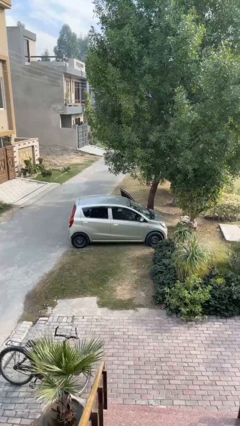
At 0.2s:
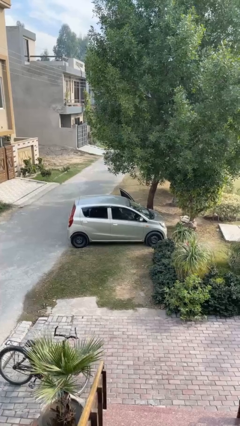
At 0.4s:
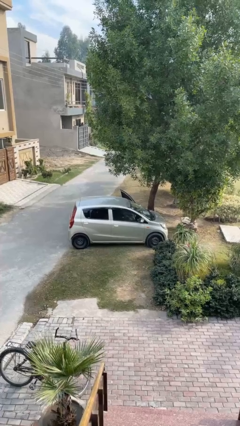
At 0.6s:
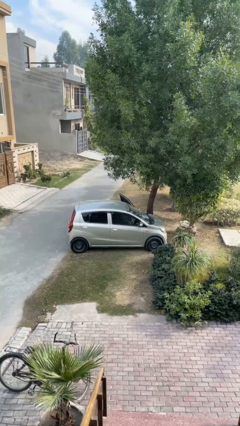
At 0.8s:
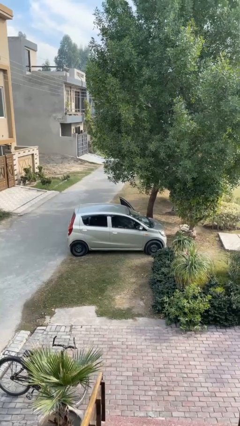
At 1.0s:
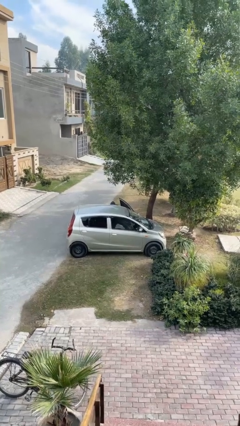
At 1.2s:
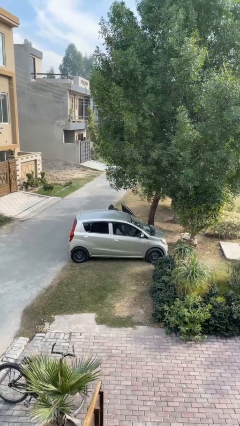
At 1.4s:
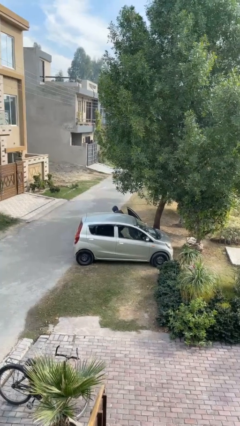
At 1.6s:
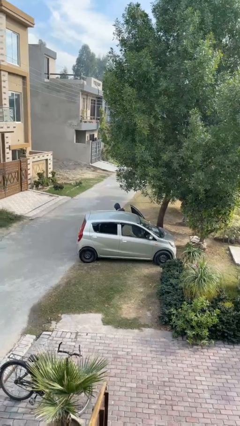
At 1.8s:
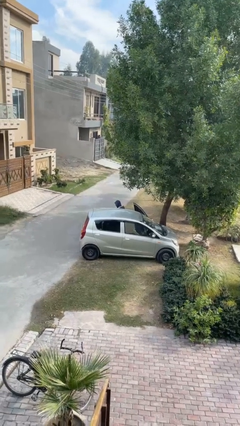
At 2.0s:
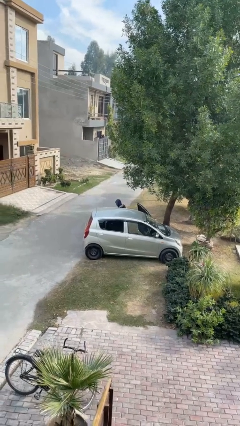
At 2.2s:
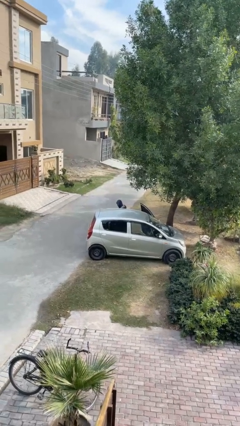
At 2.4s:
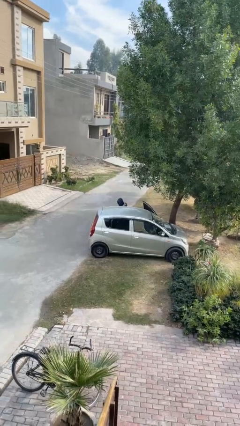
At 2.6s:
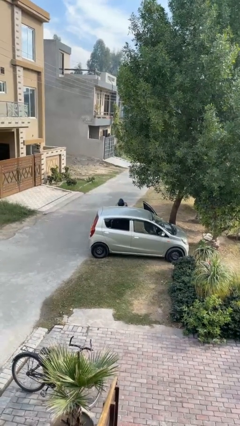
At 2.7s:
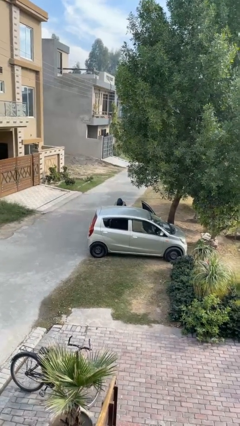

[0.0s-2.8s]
person exits car

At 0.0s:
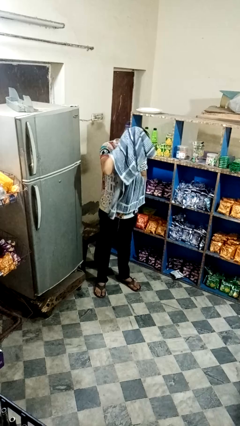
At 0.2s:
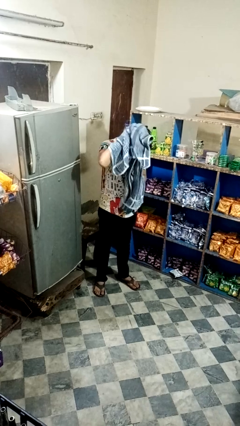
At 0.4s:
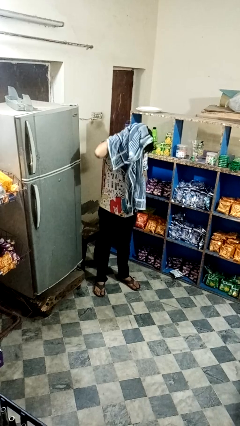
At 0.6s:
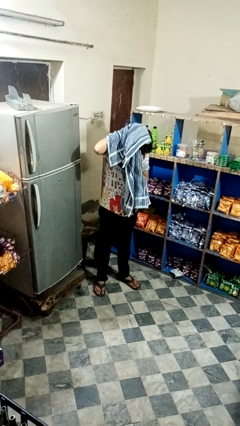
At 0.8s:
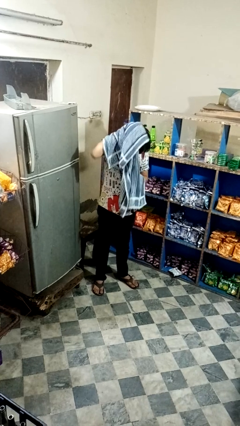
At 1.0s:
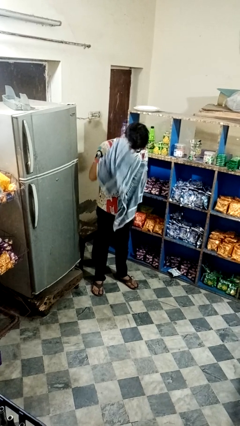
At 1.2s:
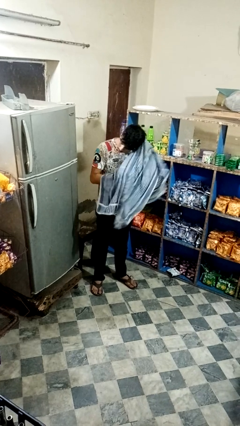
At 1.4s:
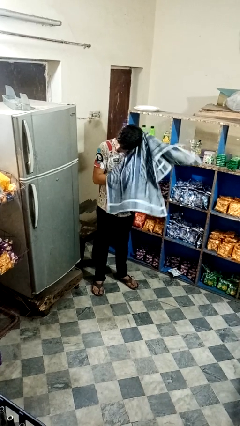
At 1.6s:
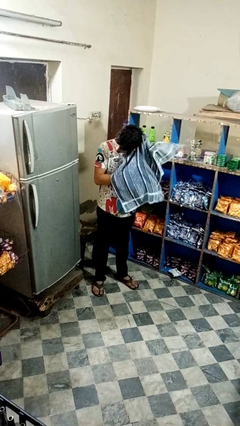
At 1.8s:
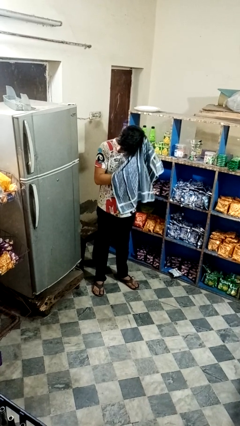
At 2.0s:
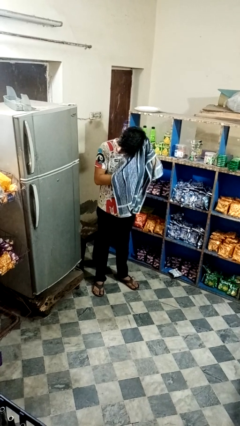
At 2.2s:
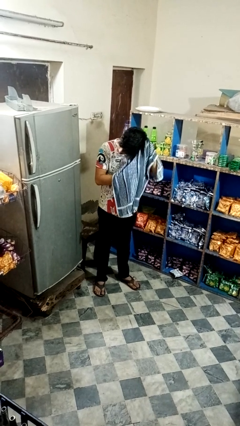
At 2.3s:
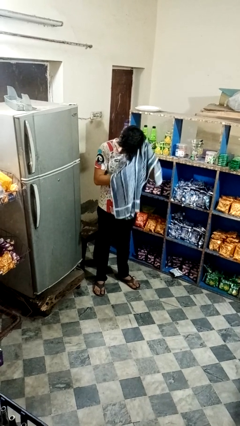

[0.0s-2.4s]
person dries hair with towel

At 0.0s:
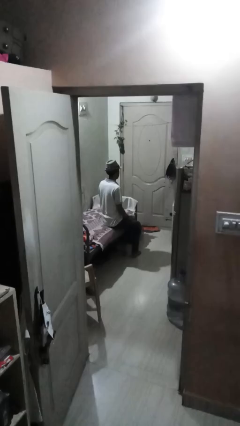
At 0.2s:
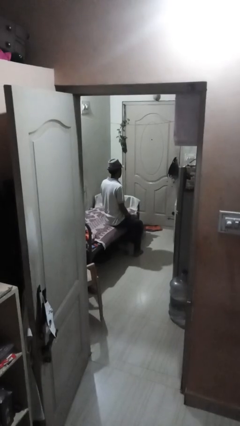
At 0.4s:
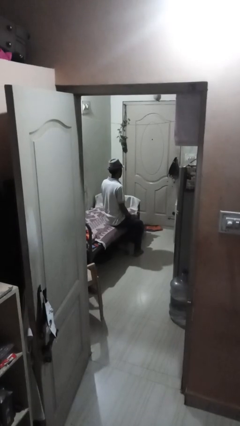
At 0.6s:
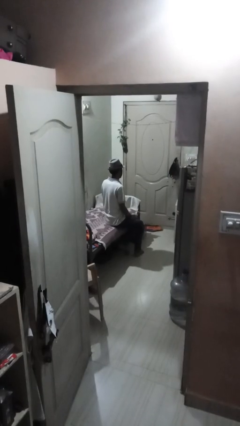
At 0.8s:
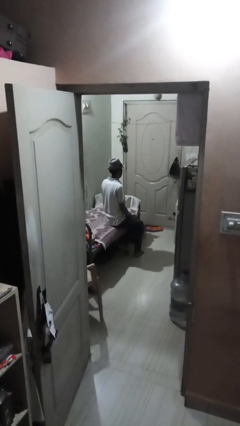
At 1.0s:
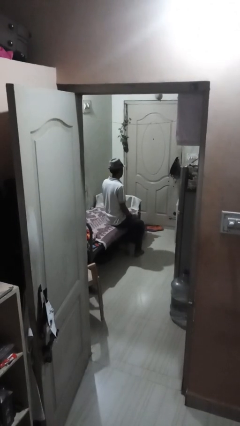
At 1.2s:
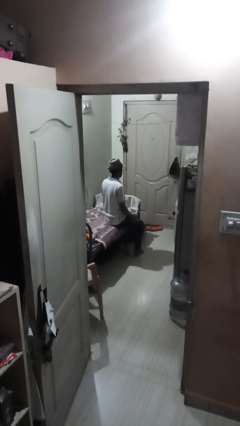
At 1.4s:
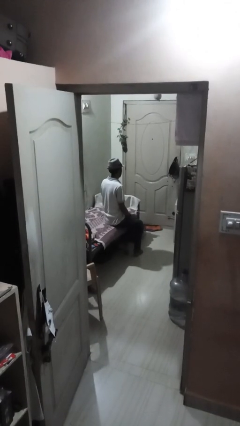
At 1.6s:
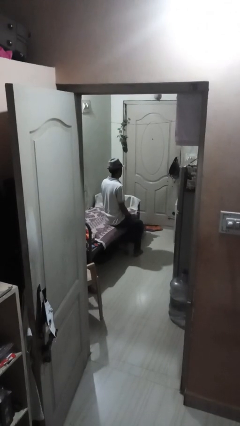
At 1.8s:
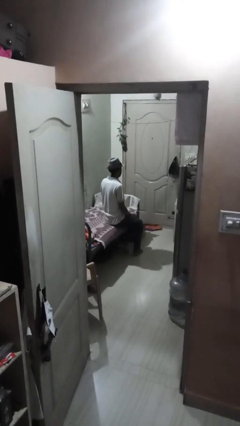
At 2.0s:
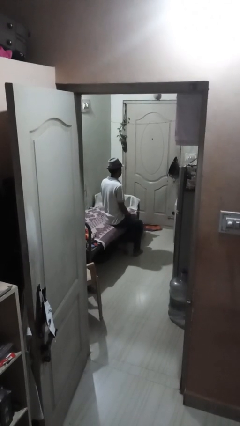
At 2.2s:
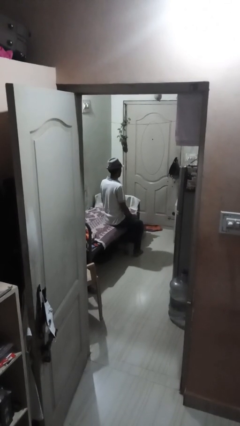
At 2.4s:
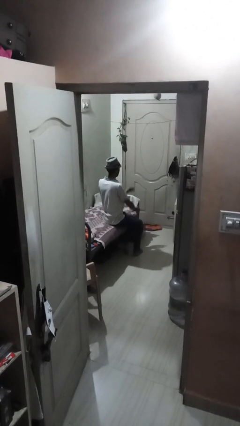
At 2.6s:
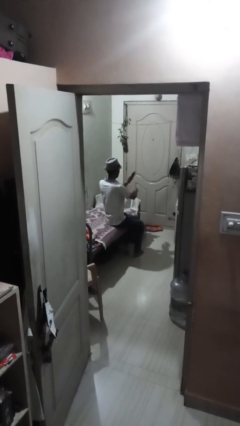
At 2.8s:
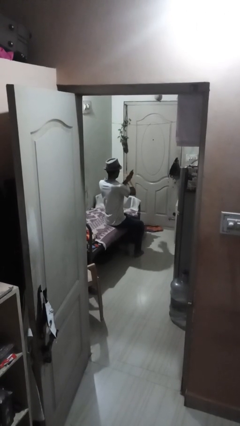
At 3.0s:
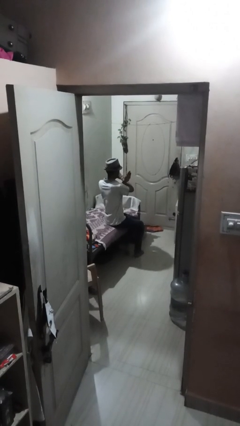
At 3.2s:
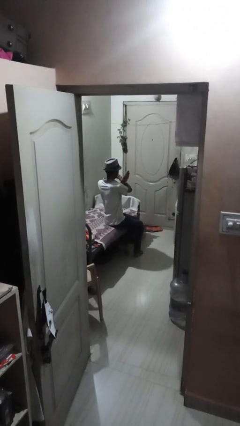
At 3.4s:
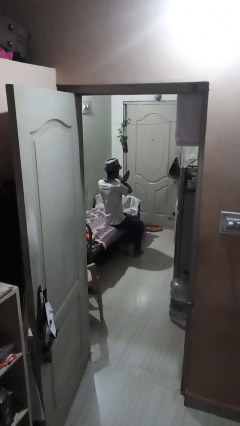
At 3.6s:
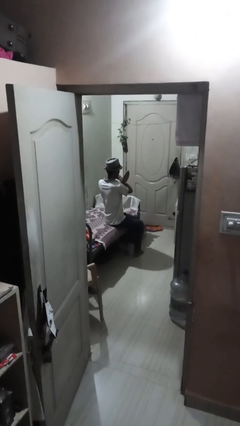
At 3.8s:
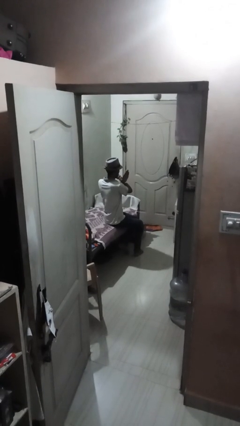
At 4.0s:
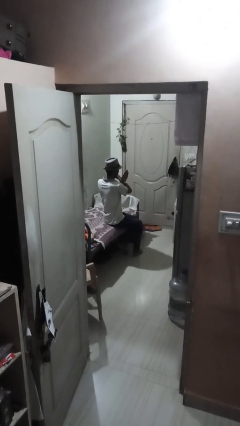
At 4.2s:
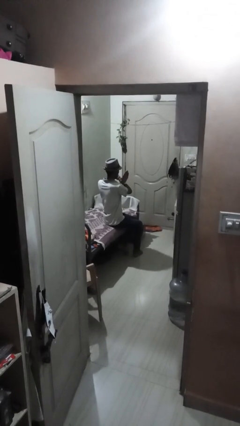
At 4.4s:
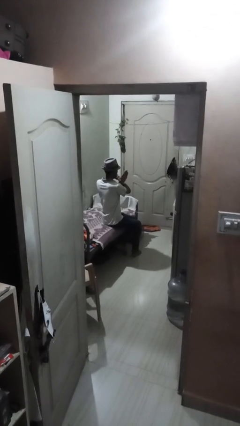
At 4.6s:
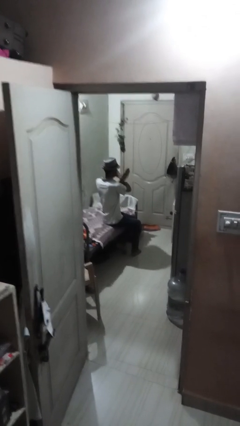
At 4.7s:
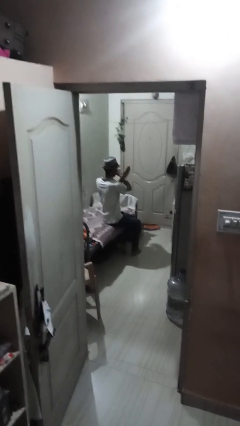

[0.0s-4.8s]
person gestures arms x

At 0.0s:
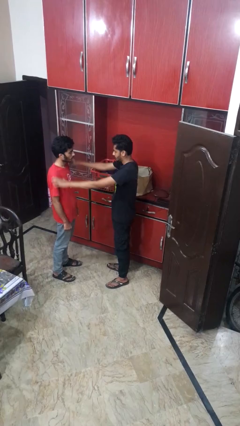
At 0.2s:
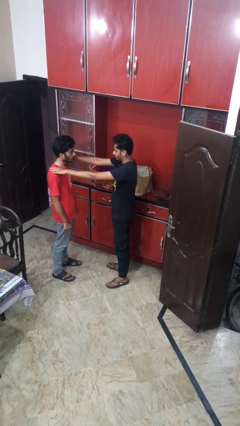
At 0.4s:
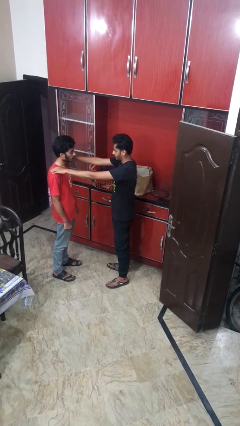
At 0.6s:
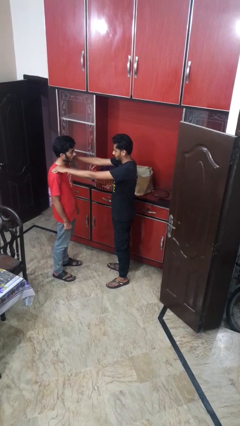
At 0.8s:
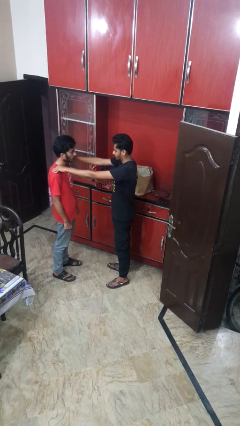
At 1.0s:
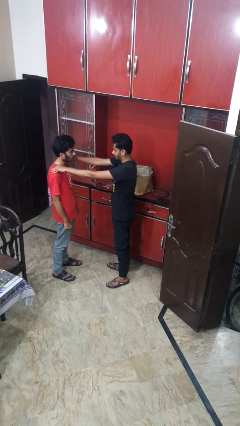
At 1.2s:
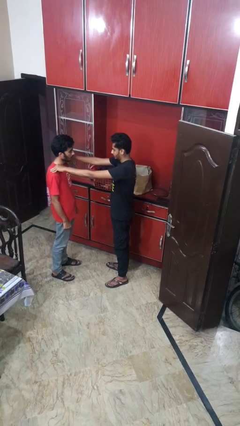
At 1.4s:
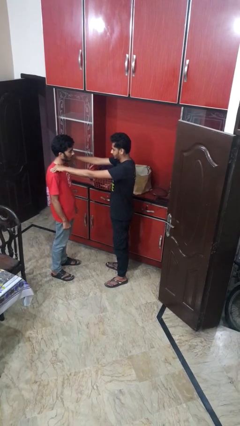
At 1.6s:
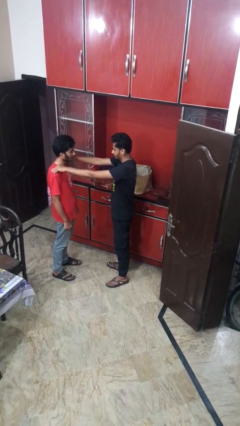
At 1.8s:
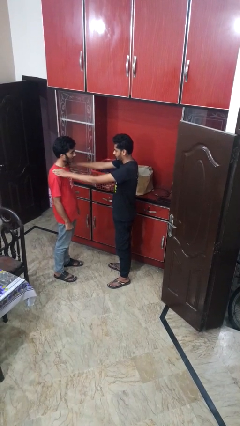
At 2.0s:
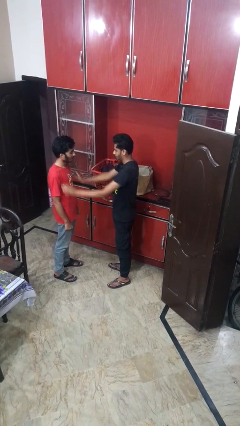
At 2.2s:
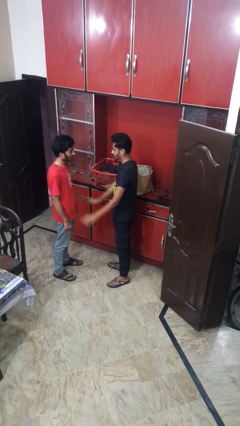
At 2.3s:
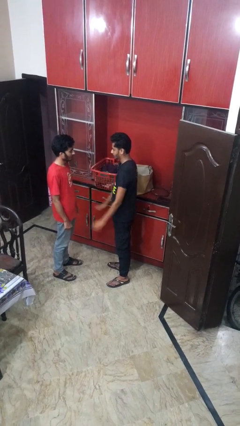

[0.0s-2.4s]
person pounds shoulders of person

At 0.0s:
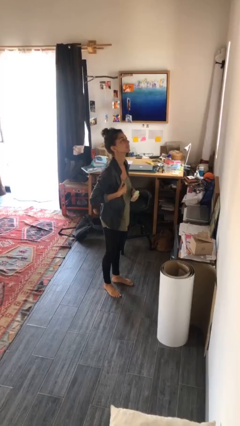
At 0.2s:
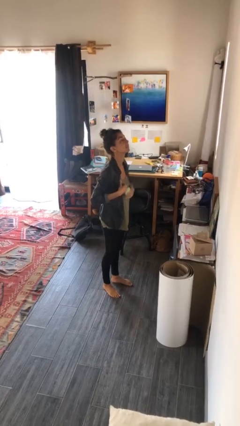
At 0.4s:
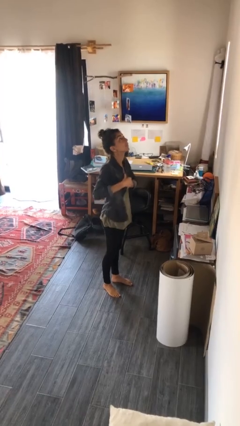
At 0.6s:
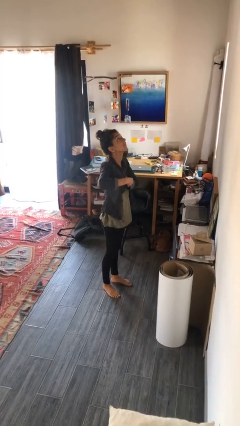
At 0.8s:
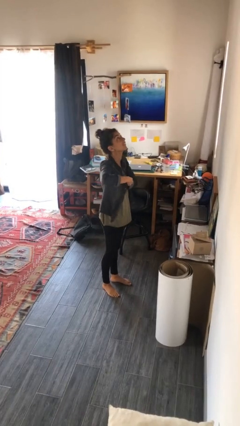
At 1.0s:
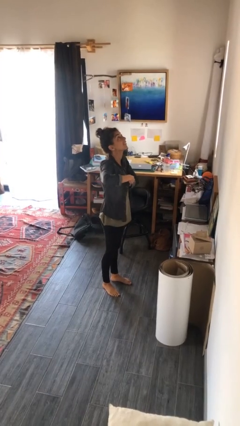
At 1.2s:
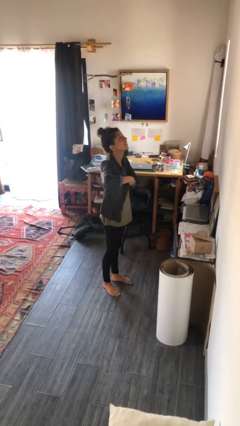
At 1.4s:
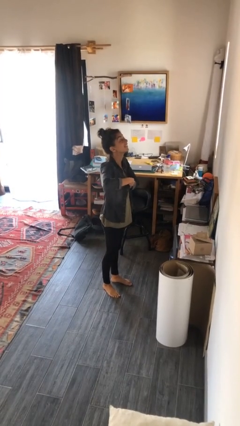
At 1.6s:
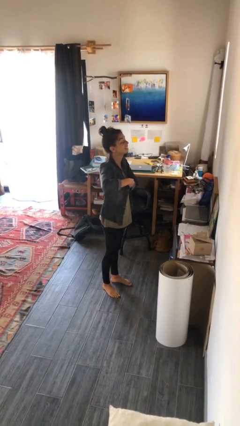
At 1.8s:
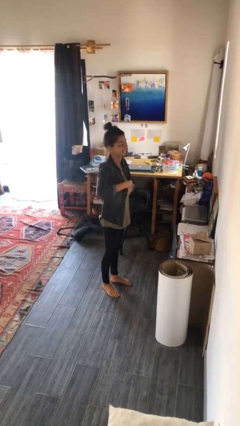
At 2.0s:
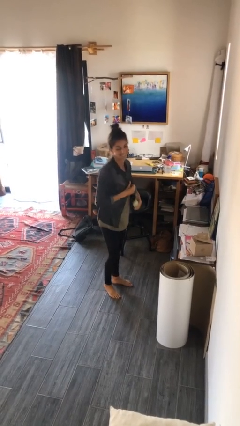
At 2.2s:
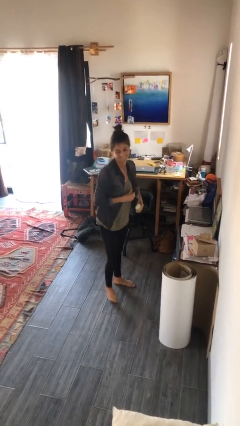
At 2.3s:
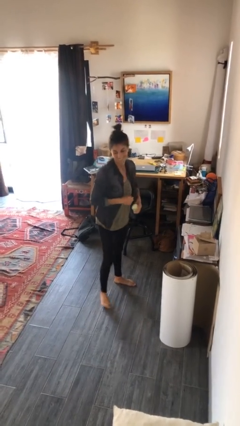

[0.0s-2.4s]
person applies deodorant

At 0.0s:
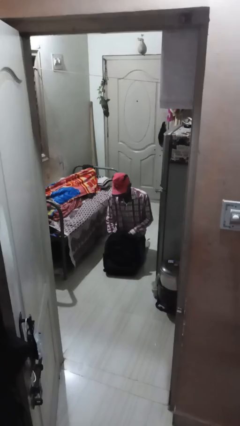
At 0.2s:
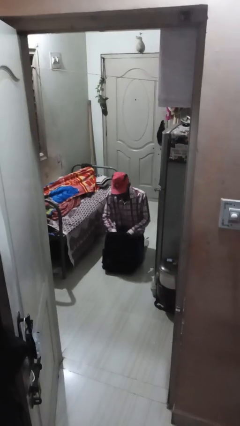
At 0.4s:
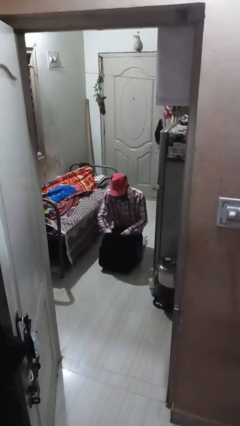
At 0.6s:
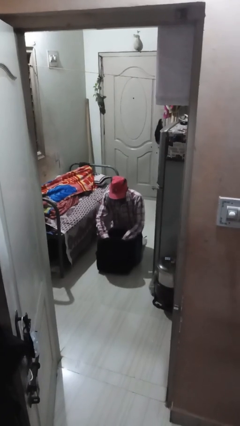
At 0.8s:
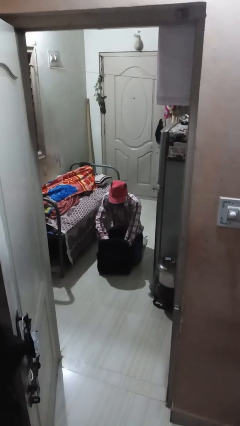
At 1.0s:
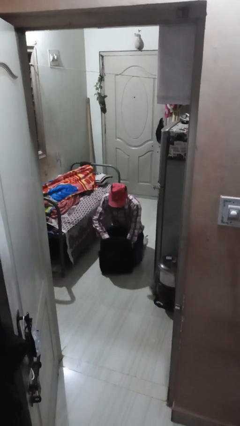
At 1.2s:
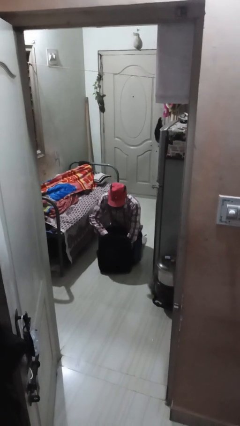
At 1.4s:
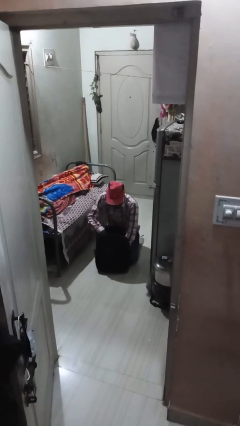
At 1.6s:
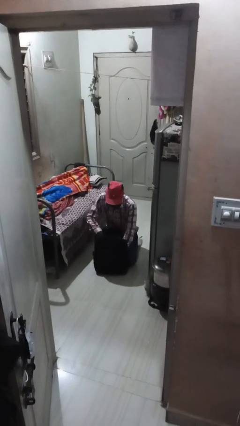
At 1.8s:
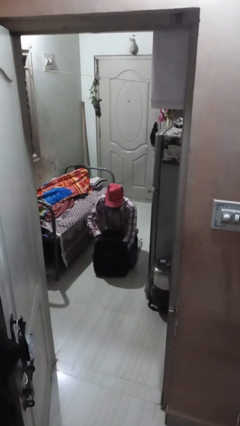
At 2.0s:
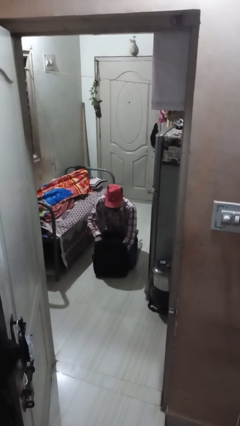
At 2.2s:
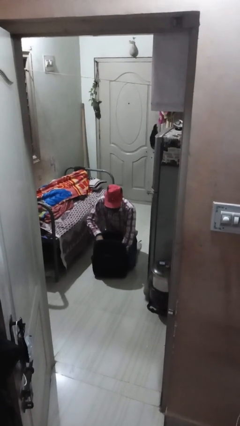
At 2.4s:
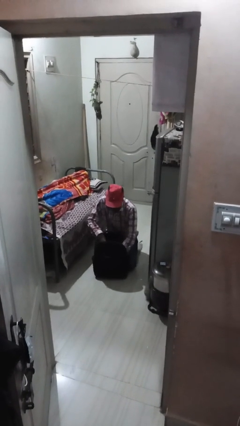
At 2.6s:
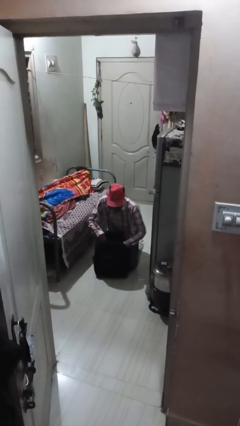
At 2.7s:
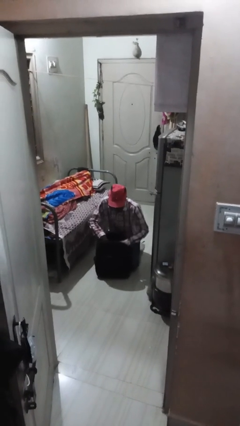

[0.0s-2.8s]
person searches in backpack
